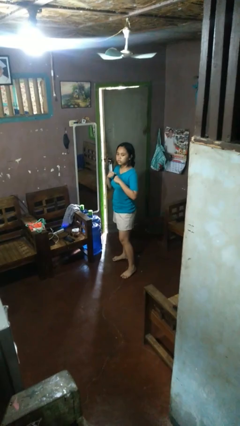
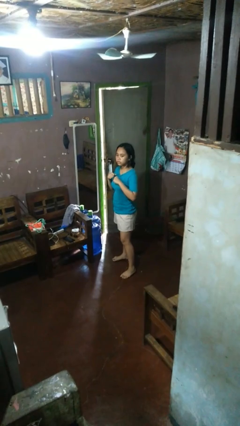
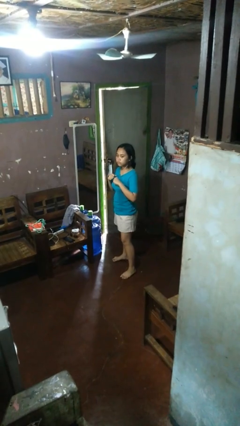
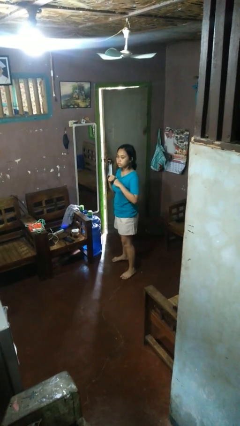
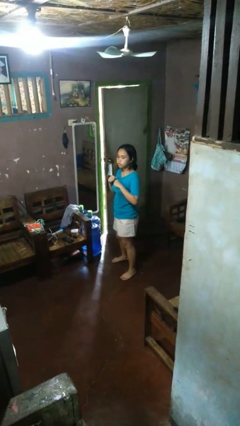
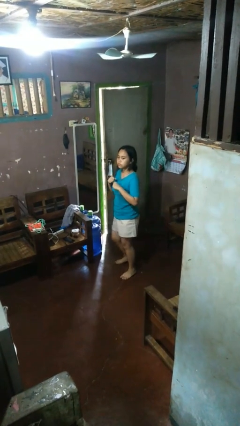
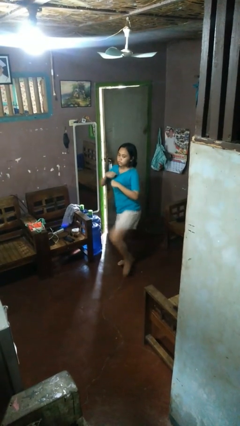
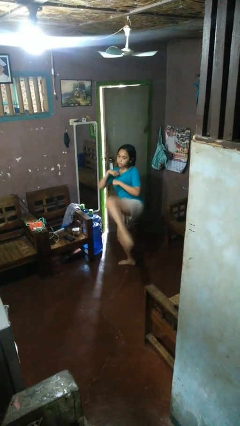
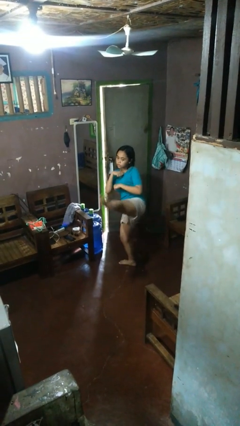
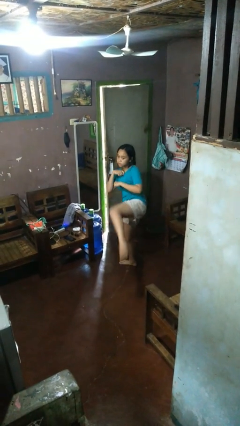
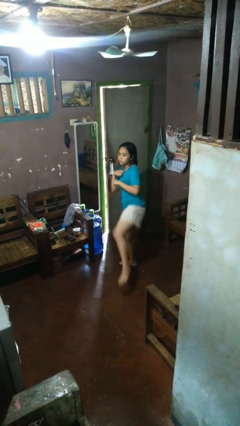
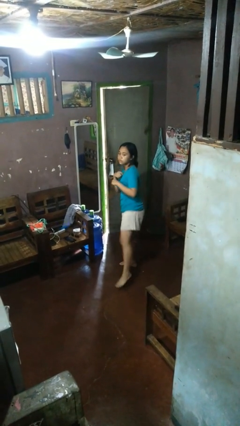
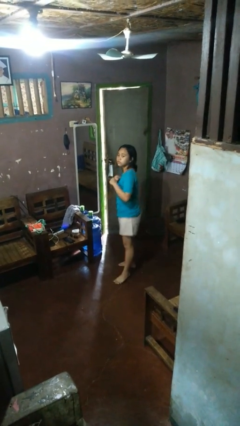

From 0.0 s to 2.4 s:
person karate kicks

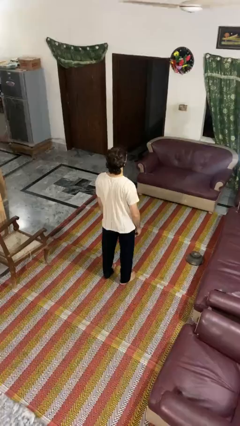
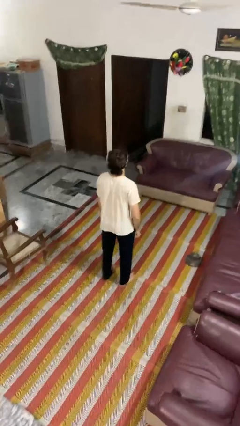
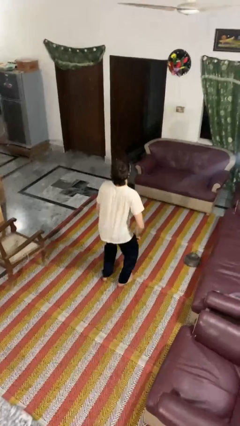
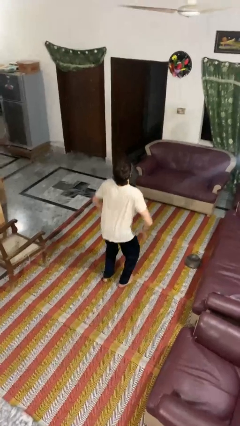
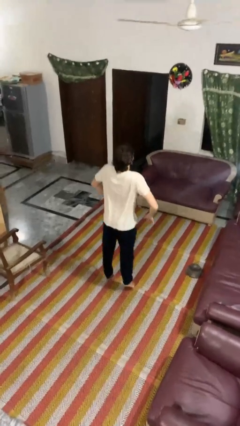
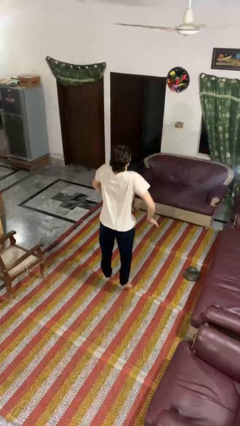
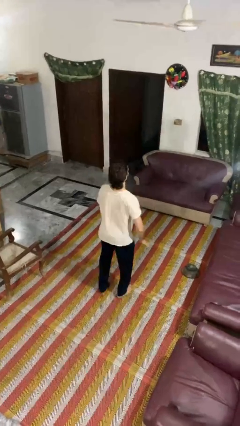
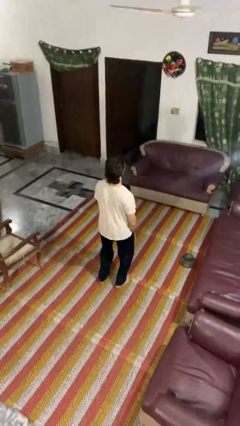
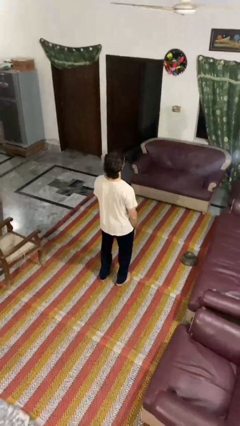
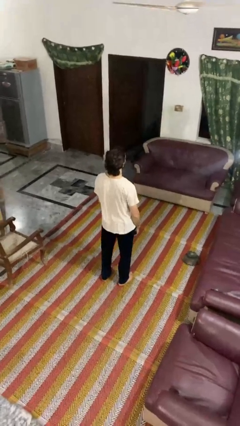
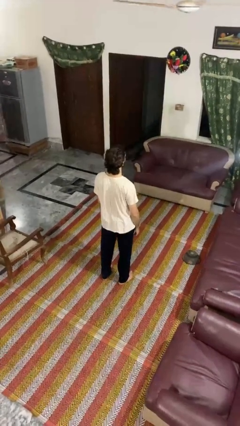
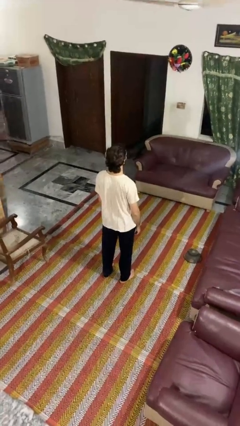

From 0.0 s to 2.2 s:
person jumps

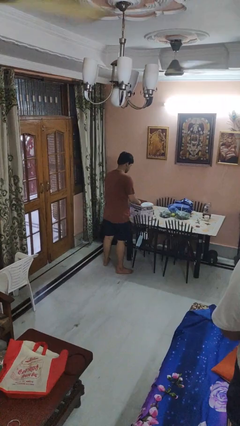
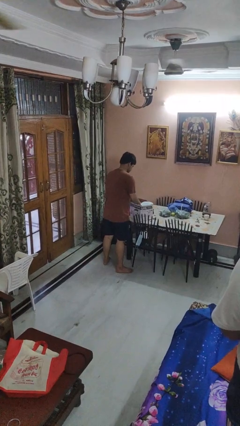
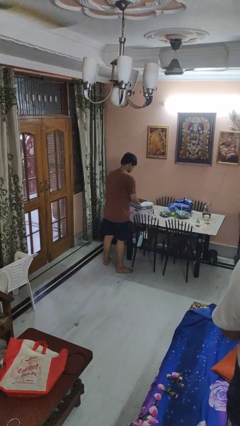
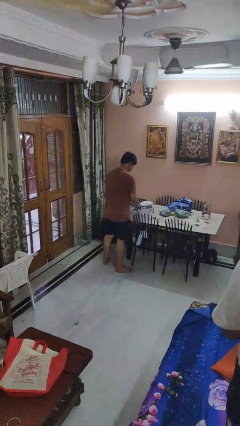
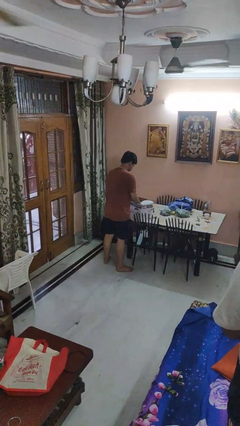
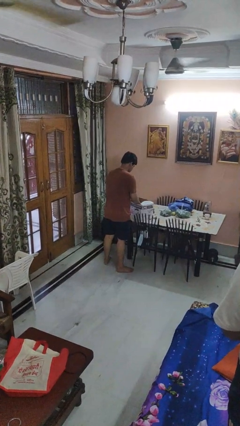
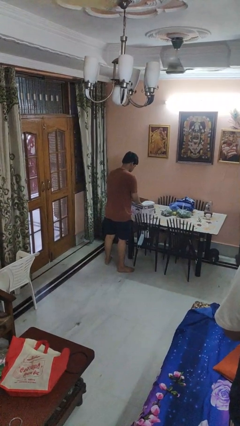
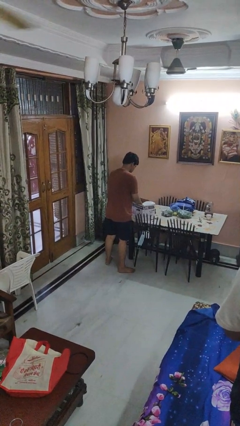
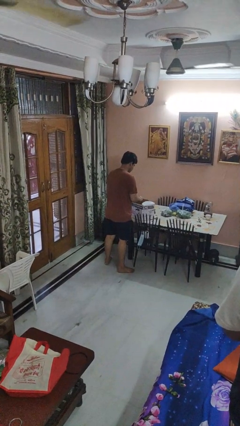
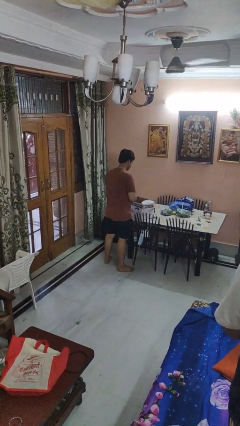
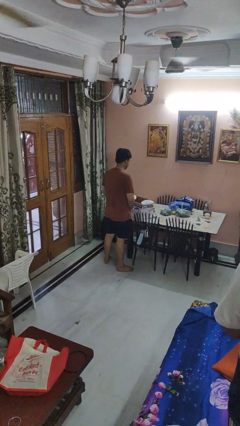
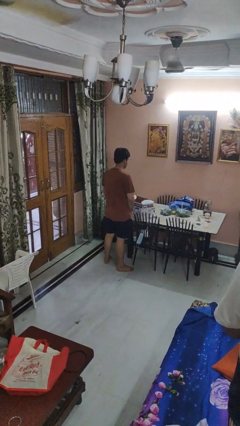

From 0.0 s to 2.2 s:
person searches in box

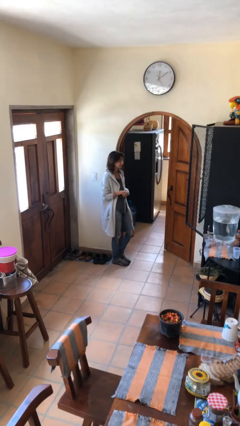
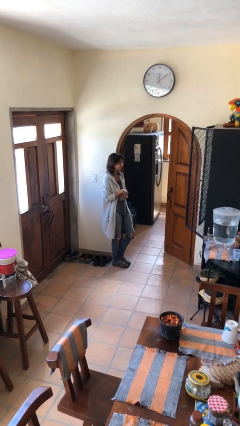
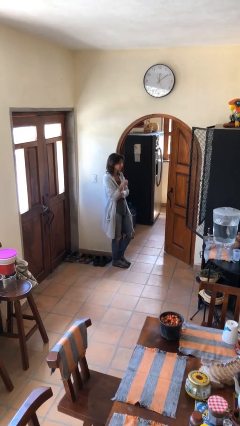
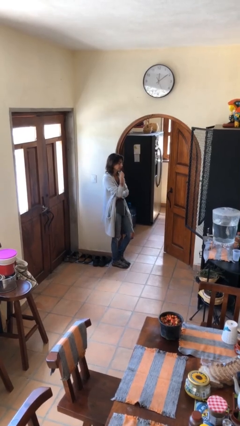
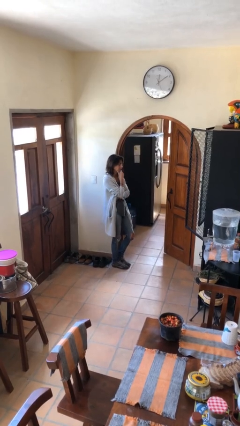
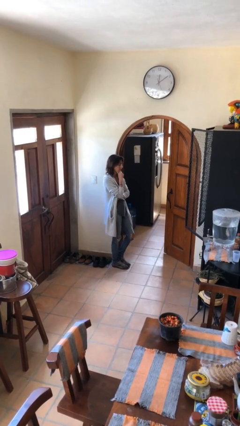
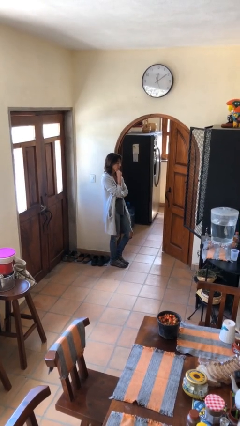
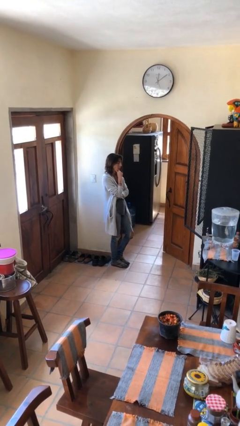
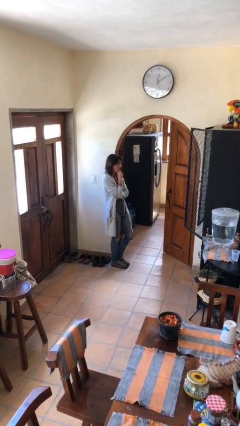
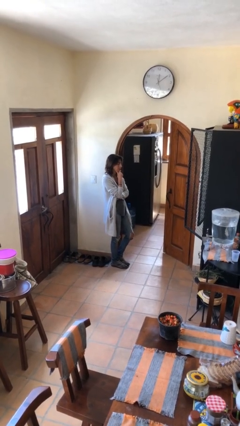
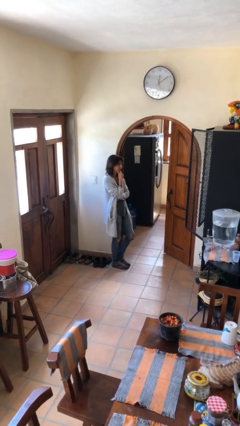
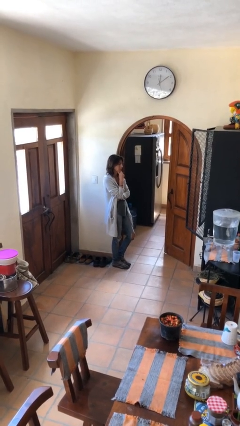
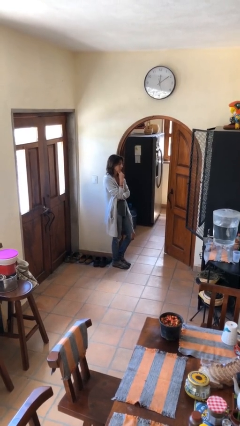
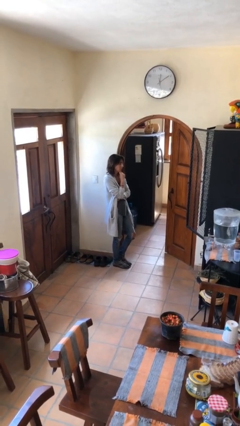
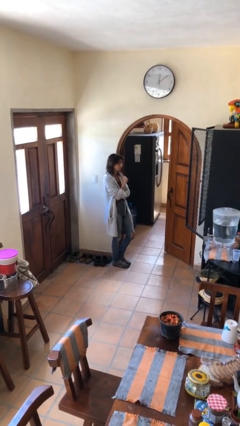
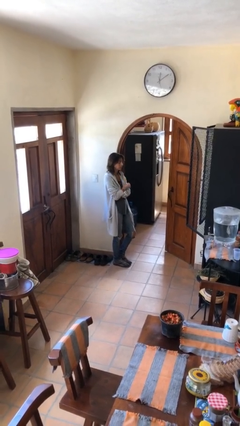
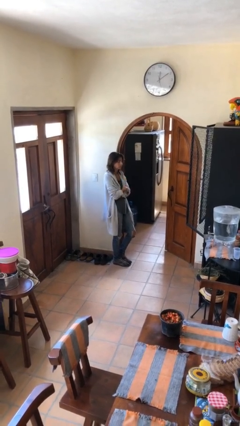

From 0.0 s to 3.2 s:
person strokes chin

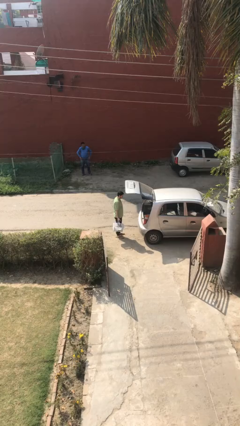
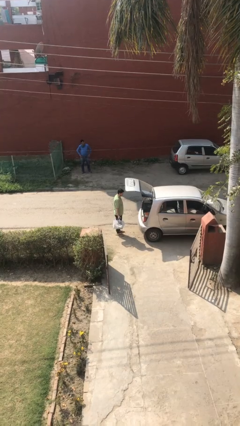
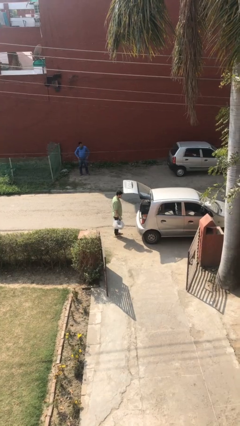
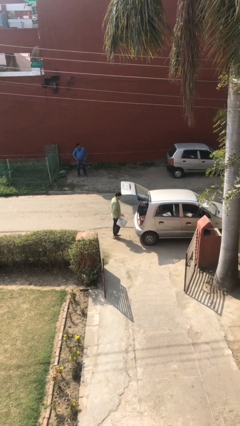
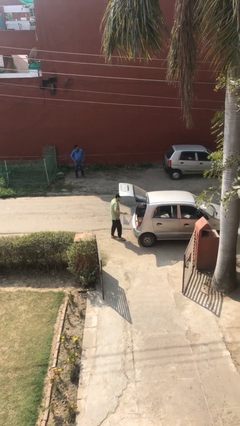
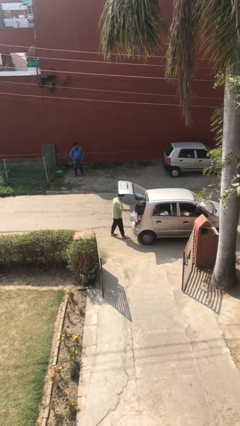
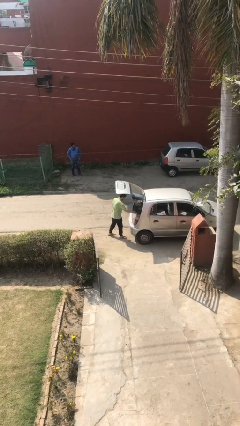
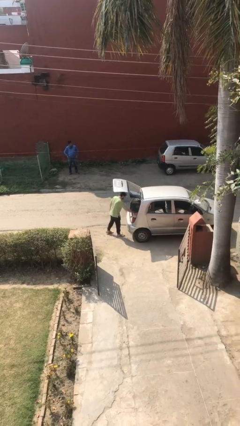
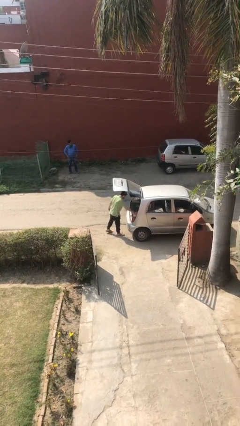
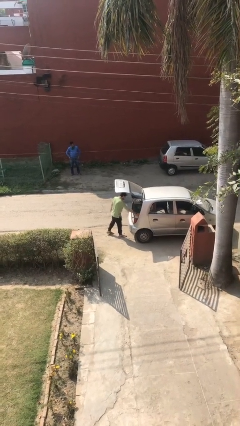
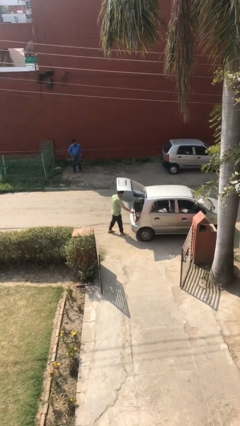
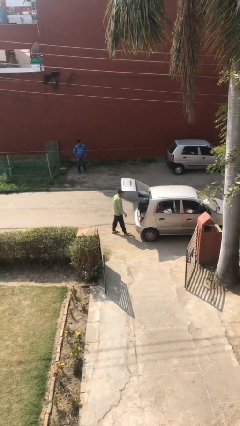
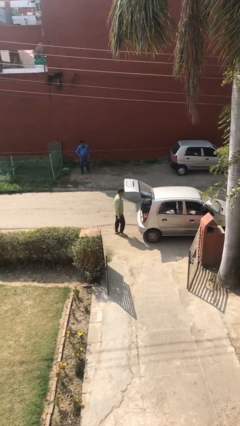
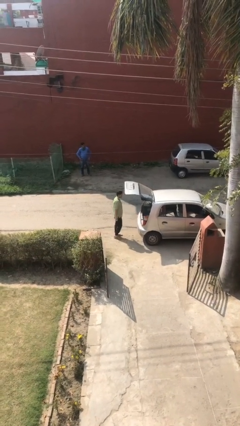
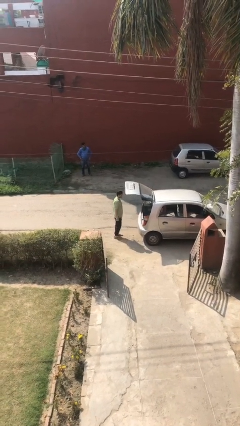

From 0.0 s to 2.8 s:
person loads car

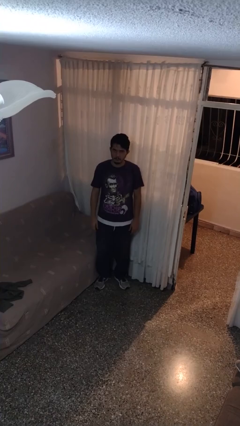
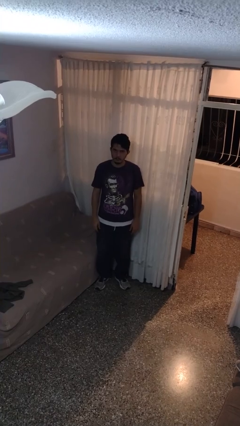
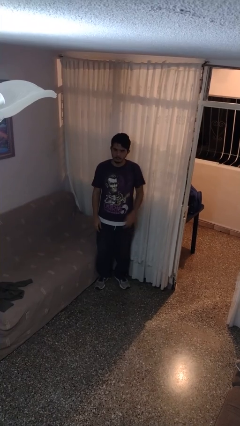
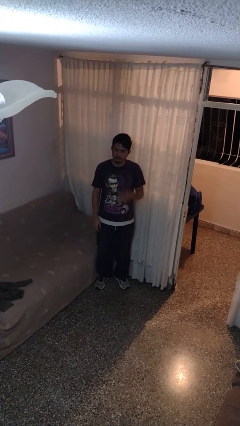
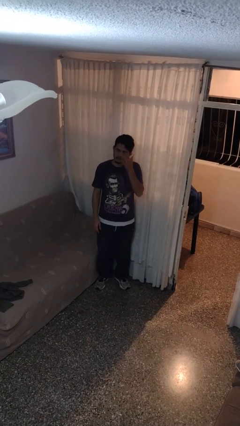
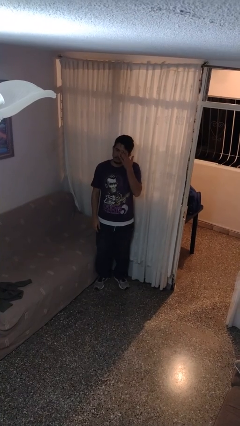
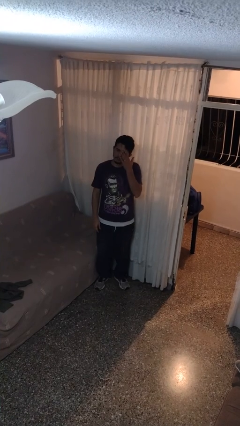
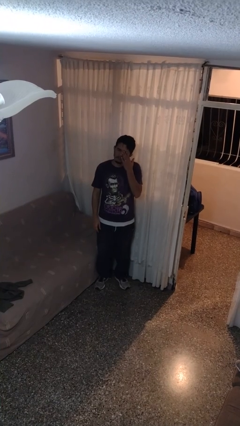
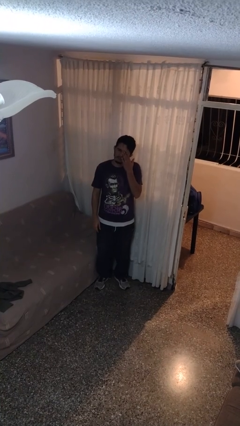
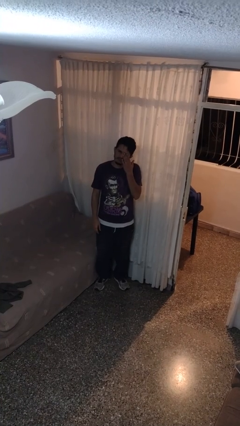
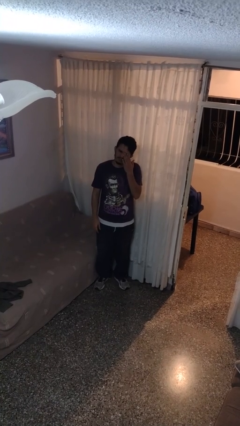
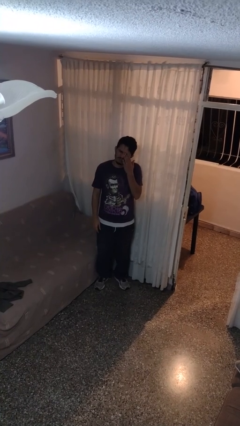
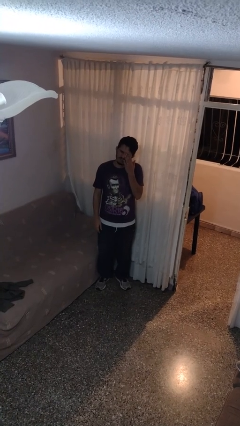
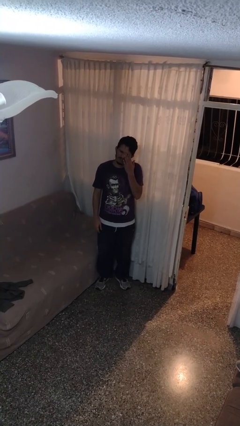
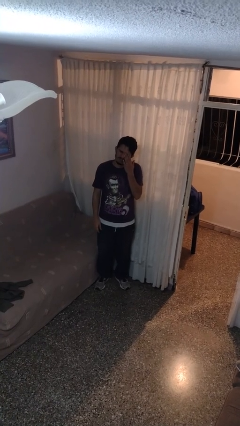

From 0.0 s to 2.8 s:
person rubs eyes

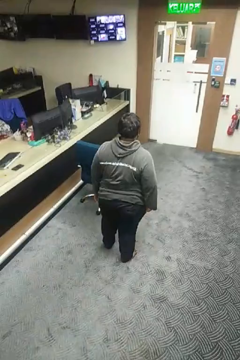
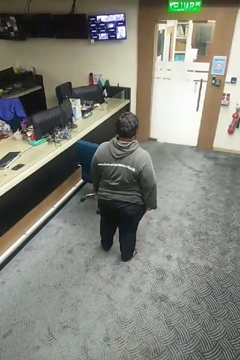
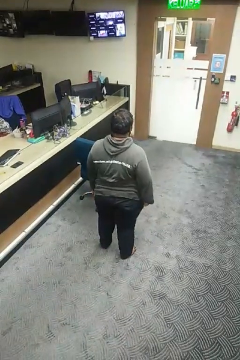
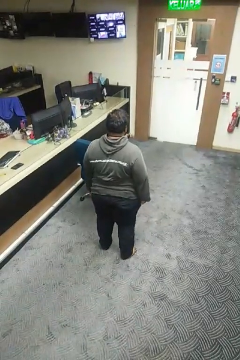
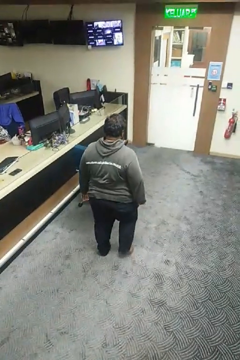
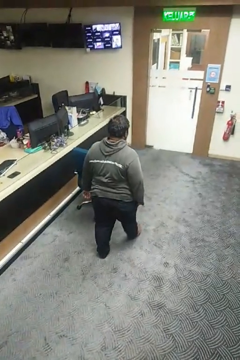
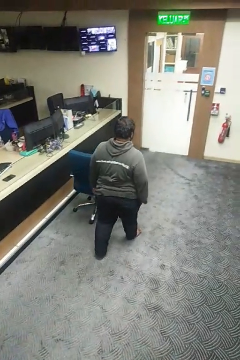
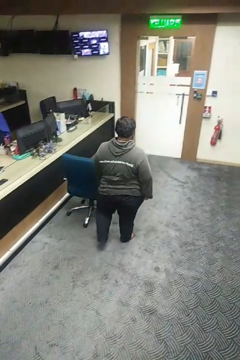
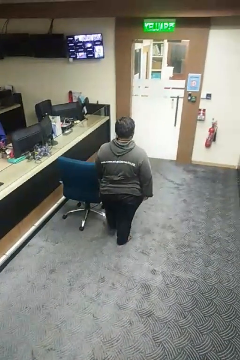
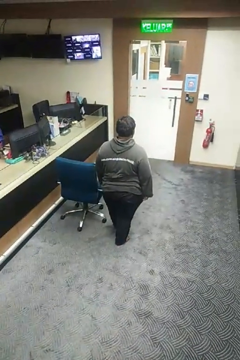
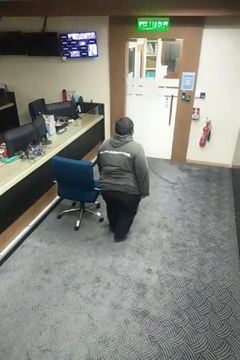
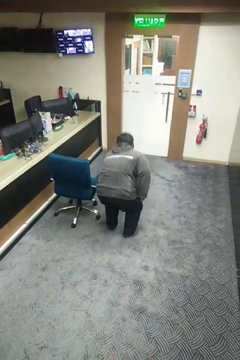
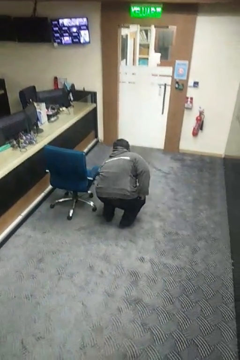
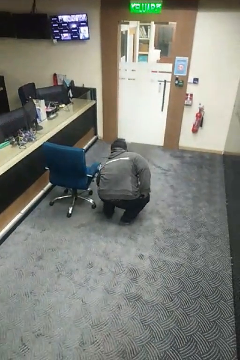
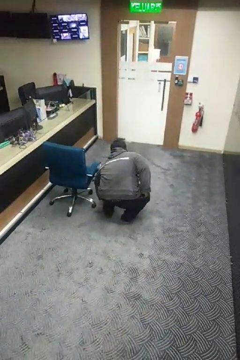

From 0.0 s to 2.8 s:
person stubs toe
